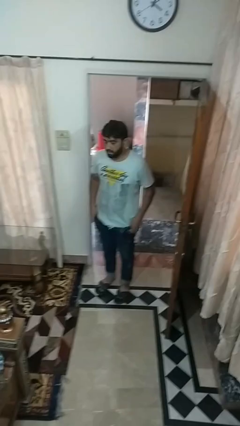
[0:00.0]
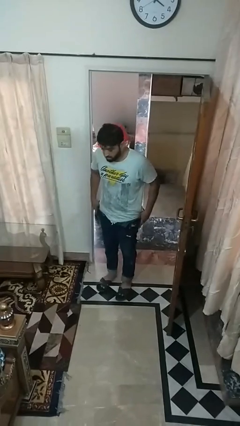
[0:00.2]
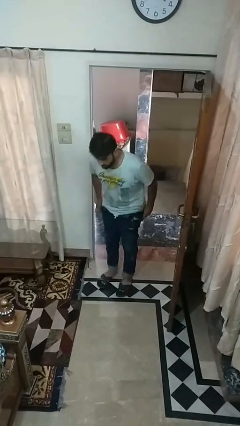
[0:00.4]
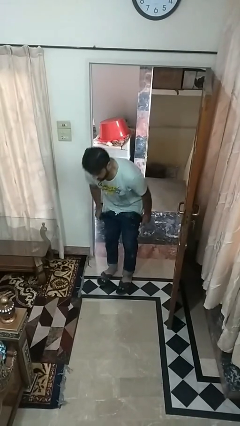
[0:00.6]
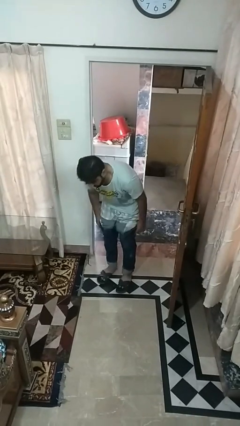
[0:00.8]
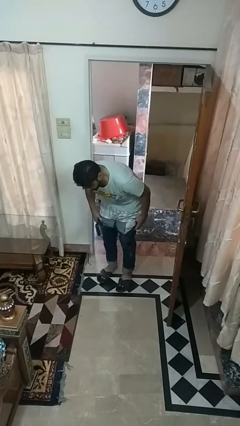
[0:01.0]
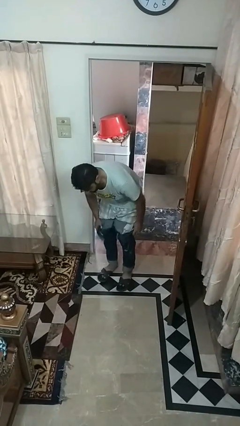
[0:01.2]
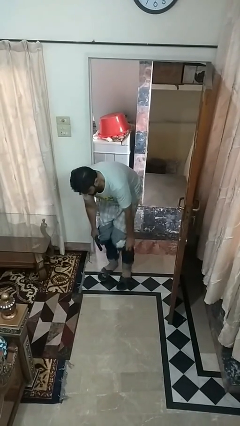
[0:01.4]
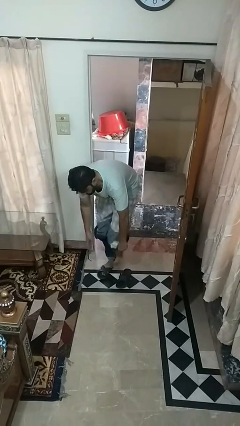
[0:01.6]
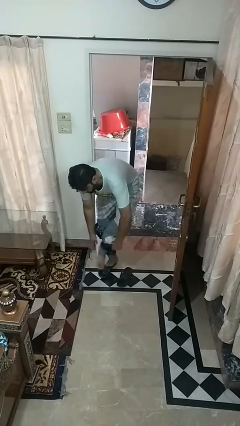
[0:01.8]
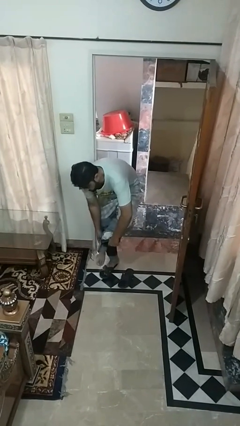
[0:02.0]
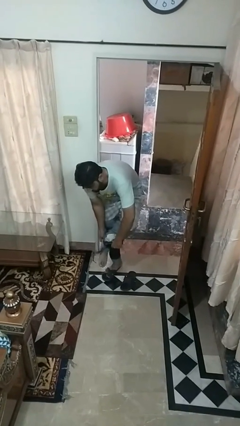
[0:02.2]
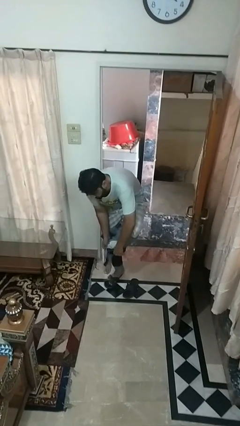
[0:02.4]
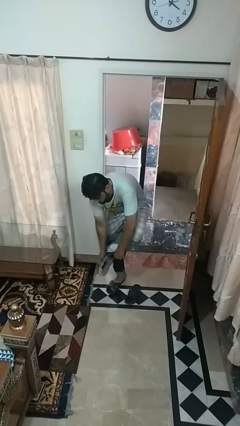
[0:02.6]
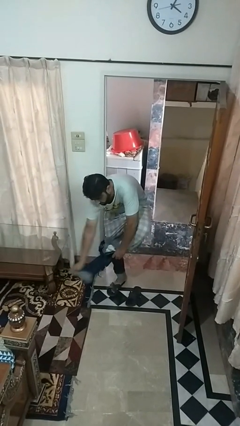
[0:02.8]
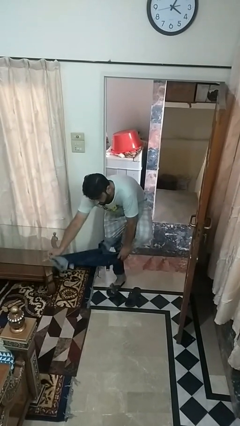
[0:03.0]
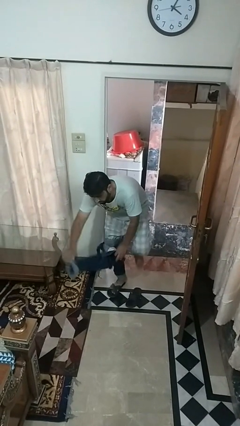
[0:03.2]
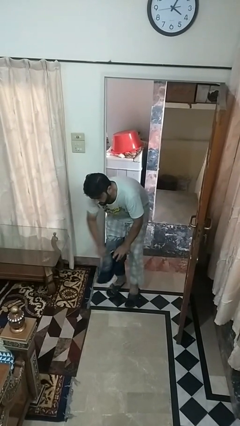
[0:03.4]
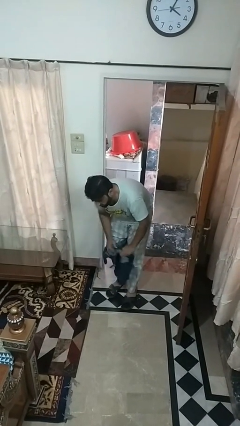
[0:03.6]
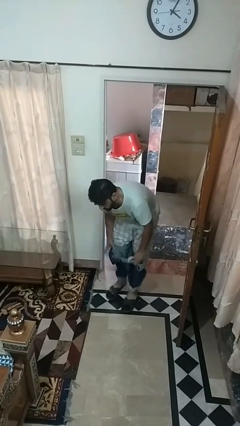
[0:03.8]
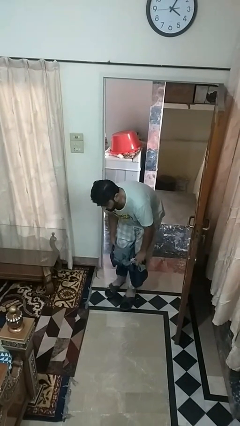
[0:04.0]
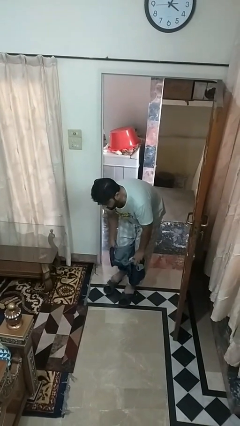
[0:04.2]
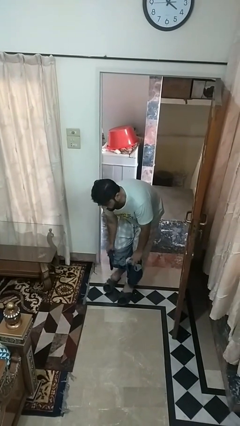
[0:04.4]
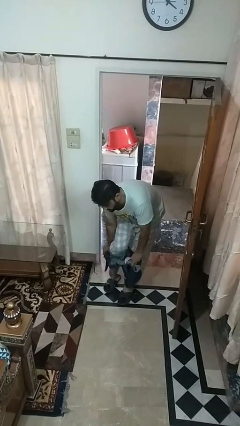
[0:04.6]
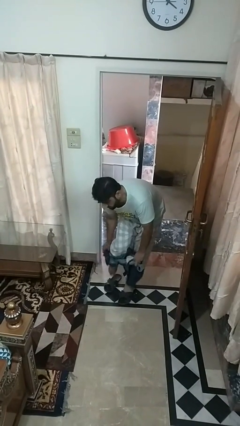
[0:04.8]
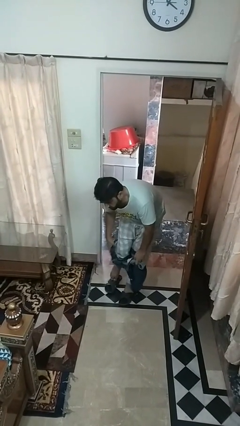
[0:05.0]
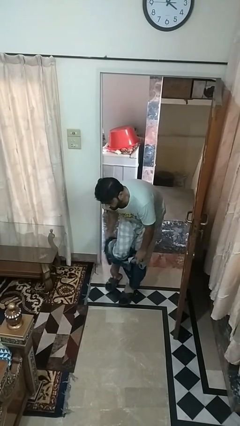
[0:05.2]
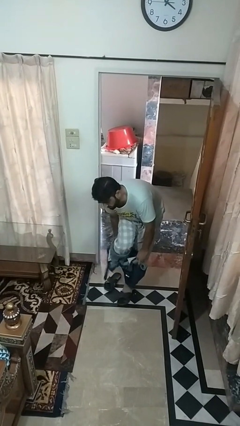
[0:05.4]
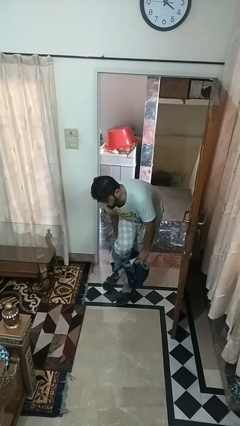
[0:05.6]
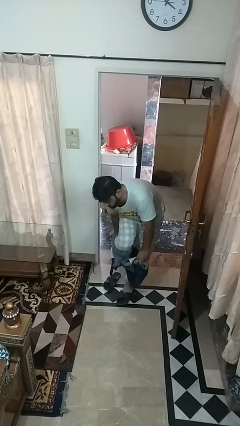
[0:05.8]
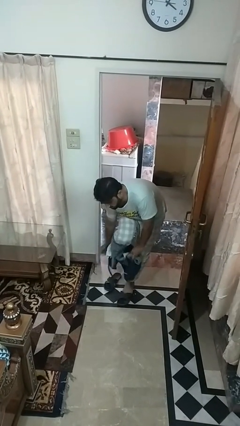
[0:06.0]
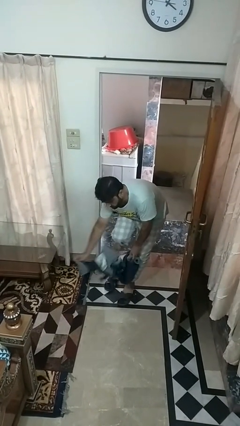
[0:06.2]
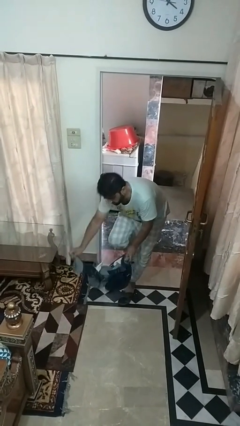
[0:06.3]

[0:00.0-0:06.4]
person takes off pants

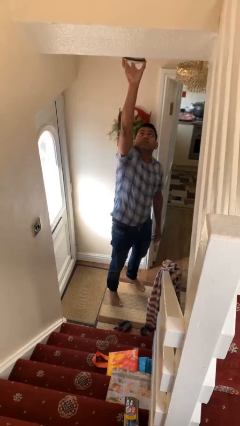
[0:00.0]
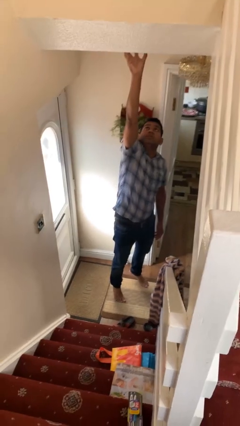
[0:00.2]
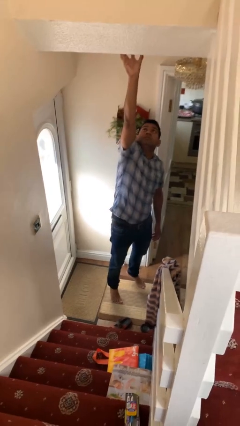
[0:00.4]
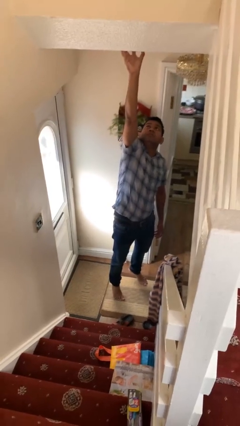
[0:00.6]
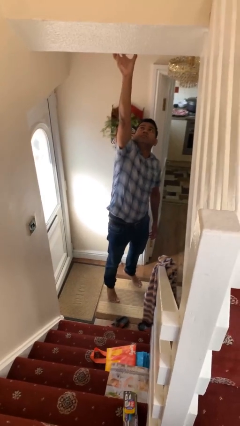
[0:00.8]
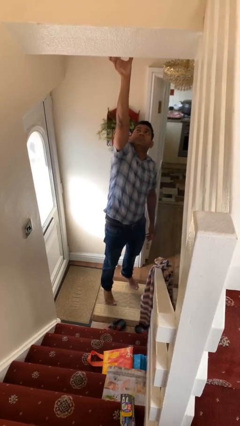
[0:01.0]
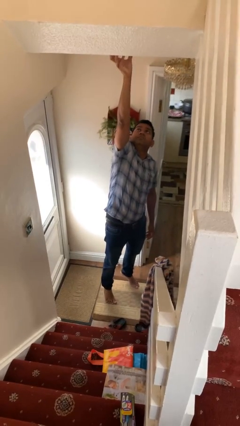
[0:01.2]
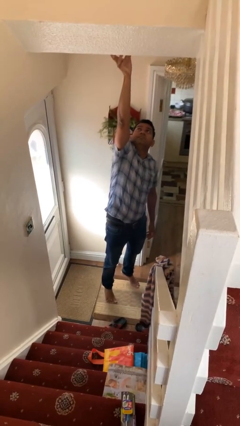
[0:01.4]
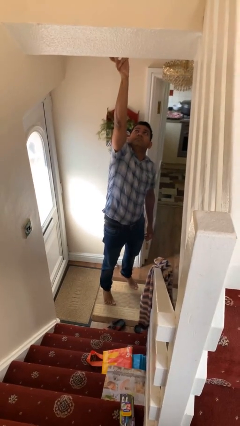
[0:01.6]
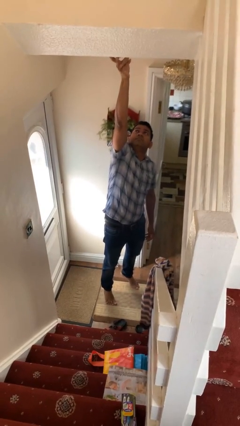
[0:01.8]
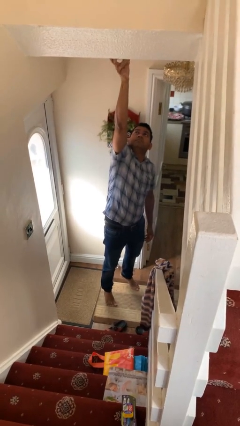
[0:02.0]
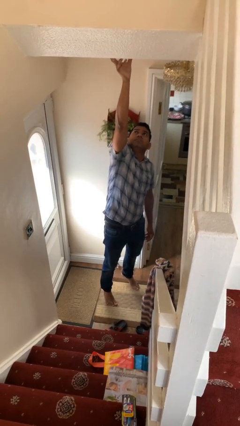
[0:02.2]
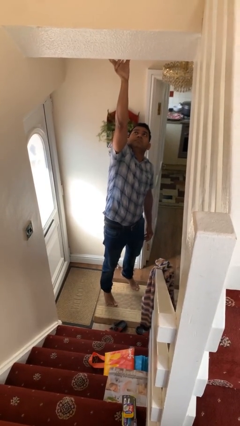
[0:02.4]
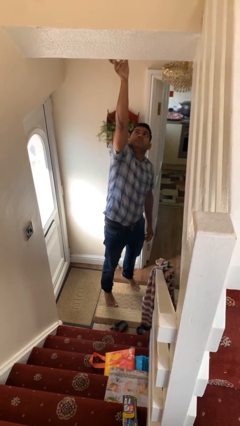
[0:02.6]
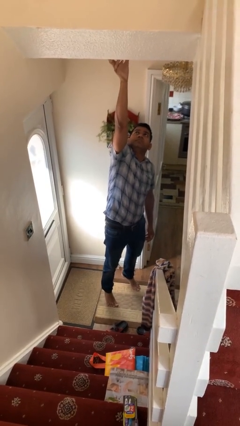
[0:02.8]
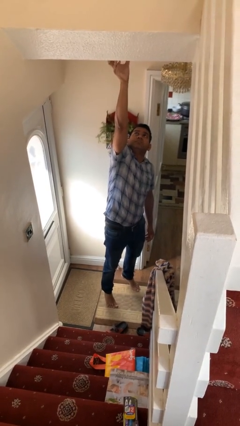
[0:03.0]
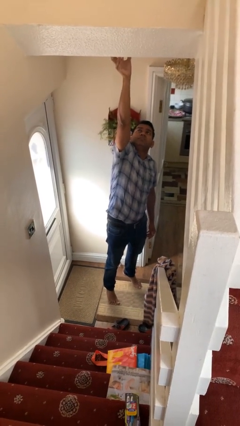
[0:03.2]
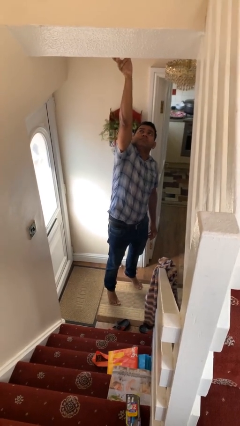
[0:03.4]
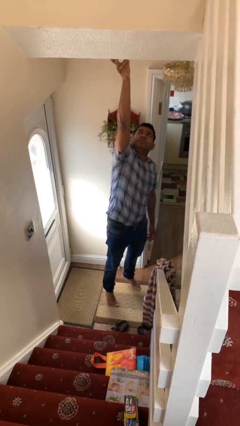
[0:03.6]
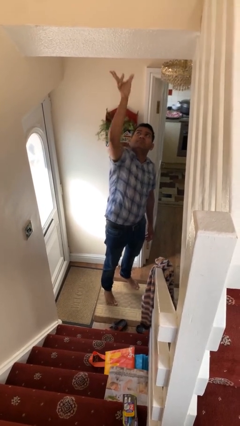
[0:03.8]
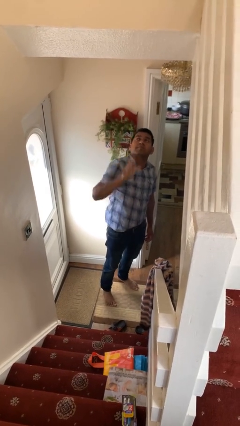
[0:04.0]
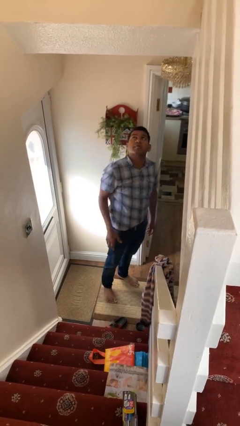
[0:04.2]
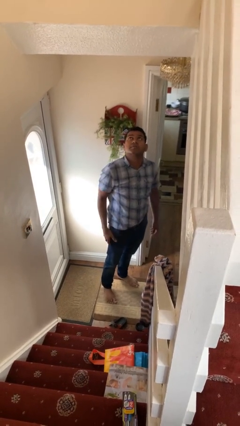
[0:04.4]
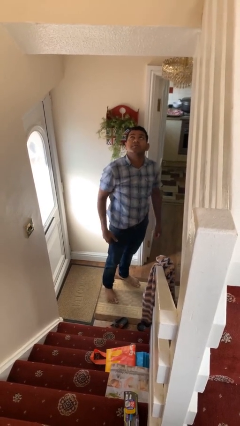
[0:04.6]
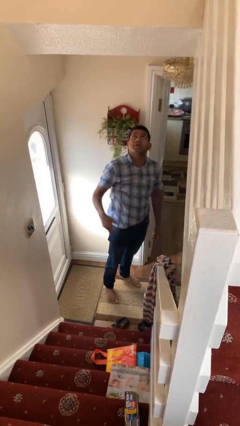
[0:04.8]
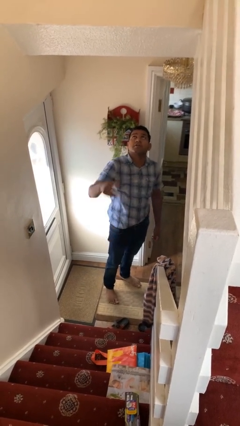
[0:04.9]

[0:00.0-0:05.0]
person puts up smoke detector

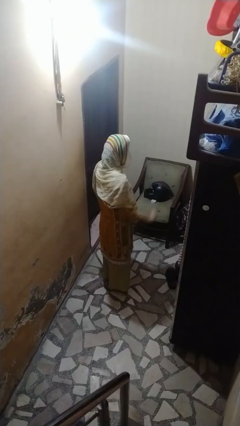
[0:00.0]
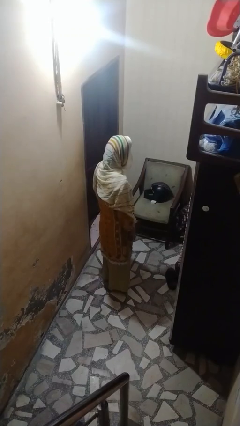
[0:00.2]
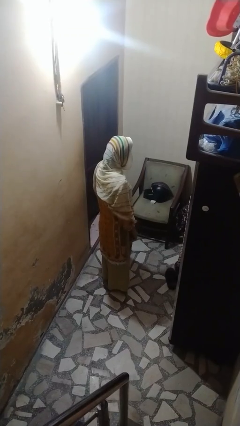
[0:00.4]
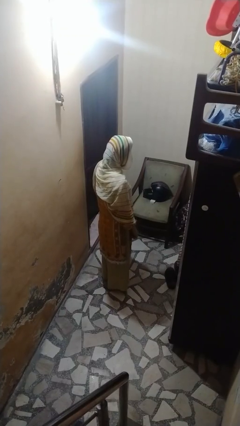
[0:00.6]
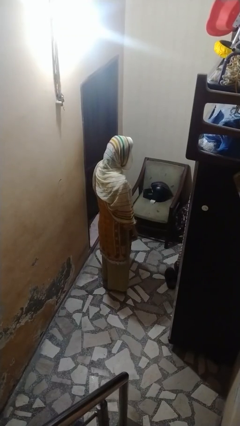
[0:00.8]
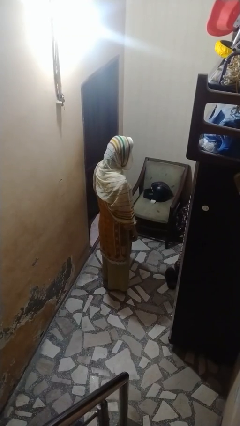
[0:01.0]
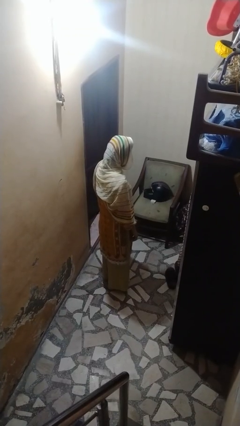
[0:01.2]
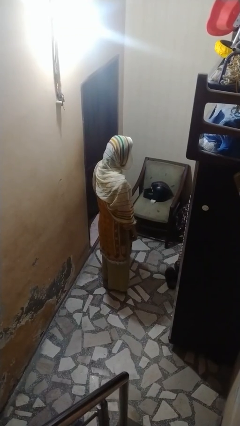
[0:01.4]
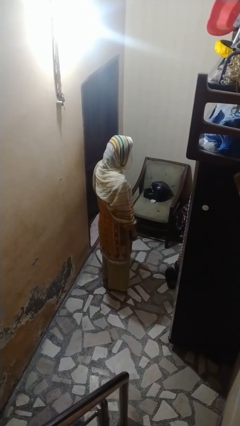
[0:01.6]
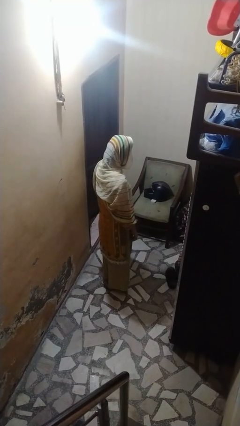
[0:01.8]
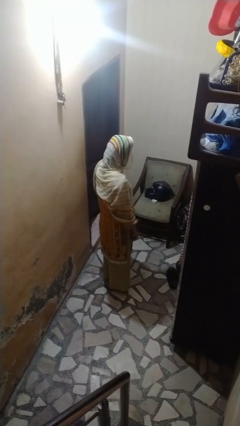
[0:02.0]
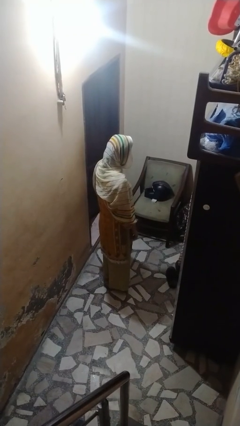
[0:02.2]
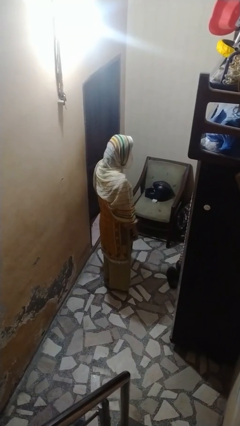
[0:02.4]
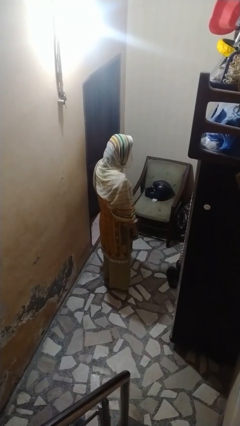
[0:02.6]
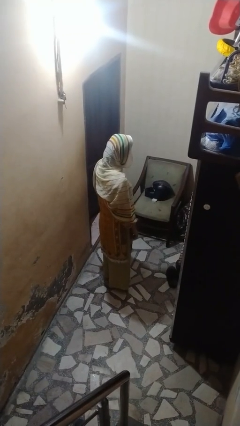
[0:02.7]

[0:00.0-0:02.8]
person gestures lower hand

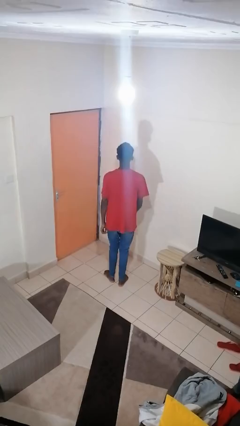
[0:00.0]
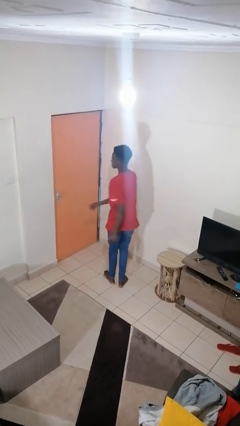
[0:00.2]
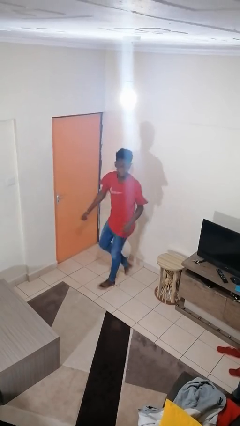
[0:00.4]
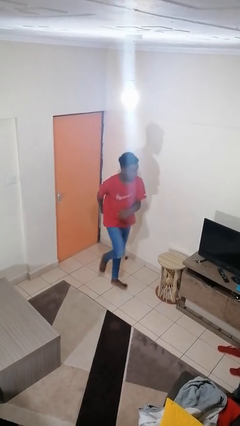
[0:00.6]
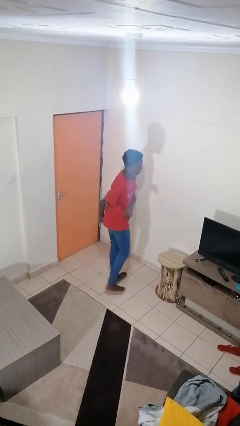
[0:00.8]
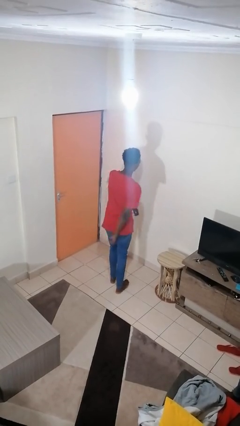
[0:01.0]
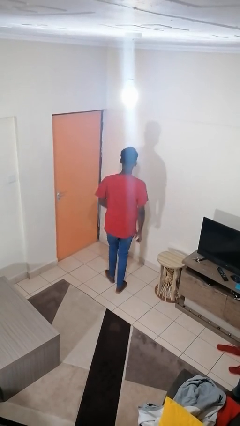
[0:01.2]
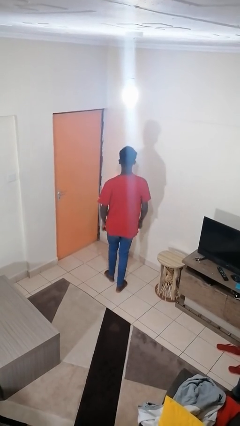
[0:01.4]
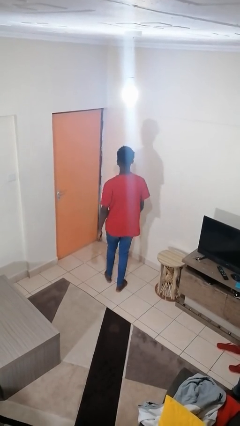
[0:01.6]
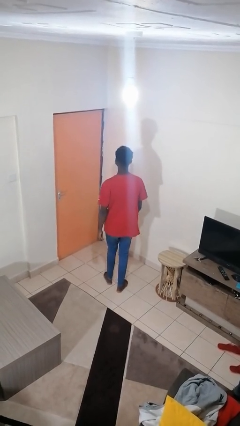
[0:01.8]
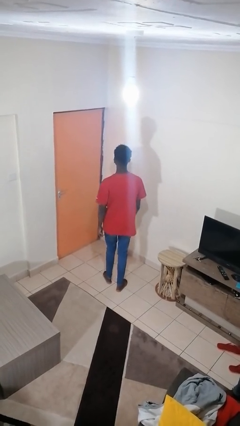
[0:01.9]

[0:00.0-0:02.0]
person twirls

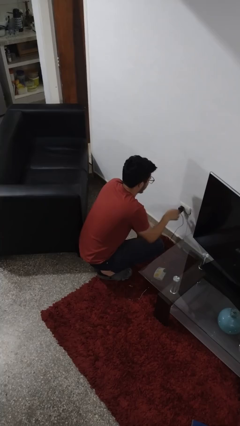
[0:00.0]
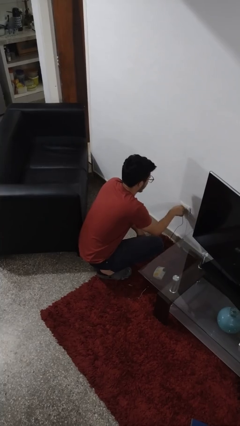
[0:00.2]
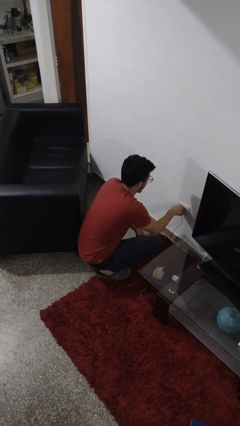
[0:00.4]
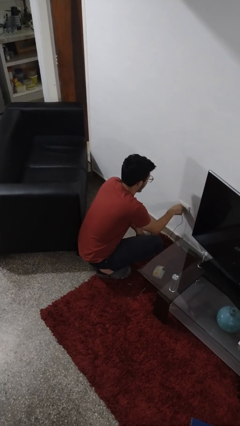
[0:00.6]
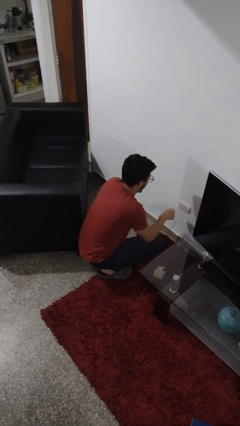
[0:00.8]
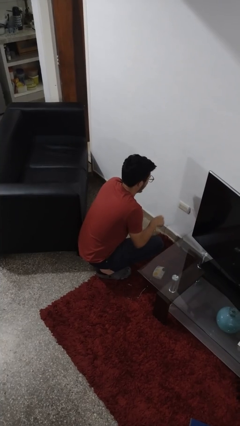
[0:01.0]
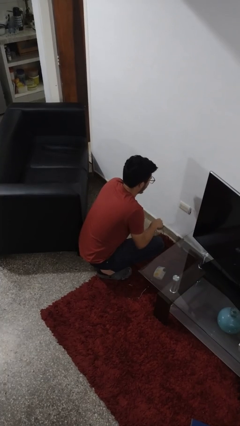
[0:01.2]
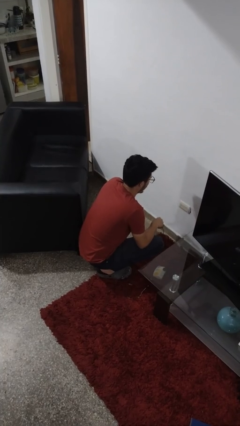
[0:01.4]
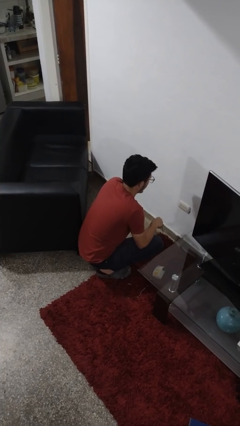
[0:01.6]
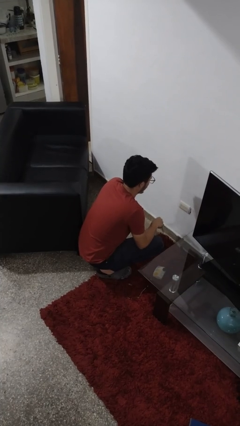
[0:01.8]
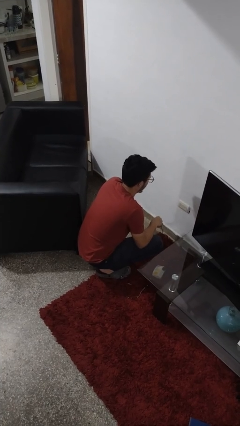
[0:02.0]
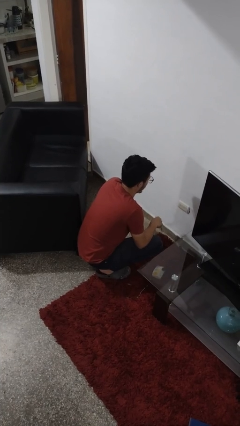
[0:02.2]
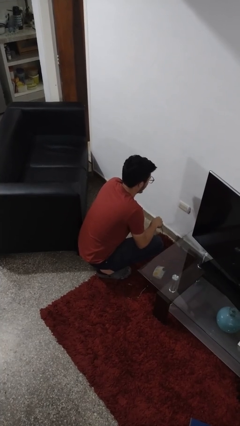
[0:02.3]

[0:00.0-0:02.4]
person unplugs from electrical socket
